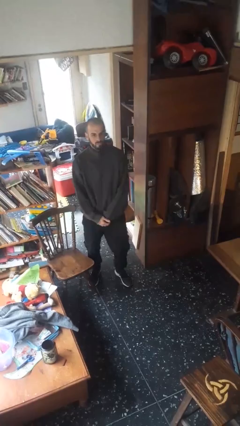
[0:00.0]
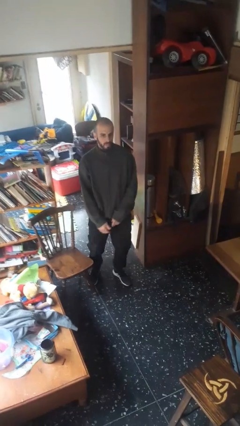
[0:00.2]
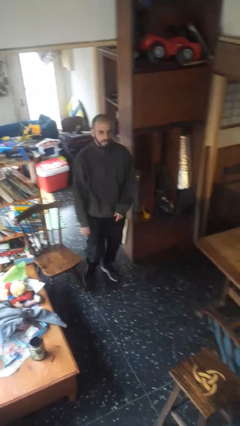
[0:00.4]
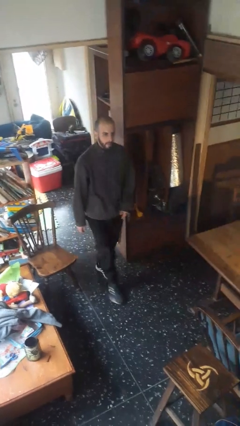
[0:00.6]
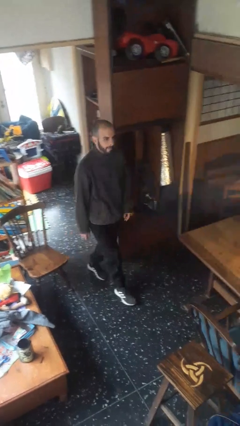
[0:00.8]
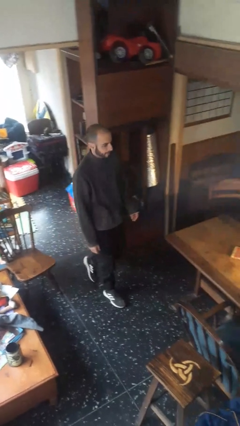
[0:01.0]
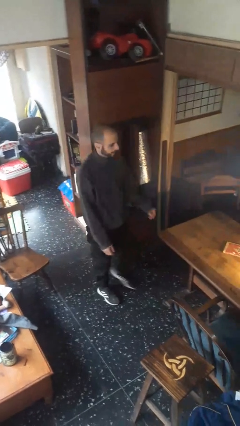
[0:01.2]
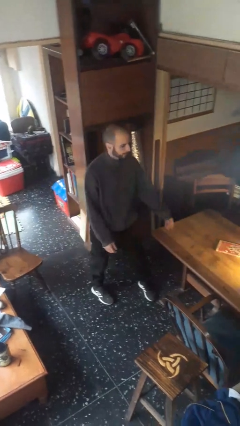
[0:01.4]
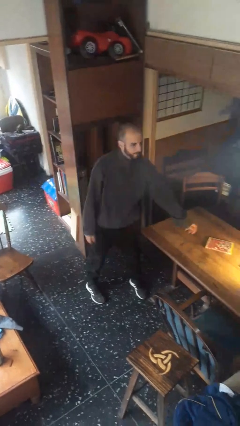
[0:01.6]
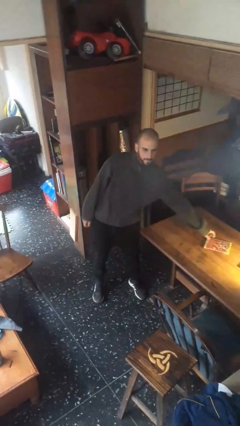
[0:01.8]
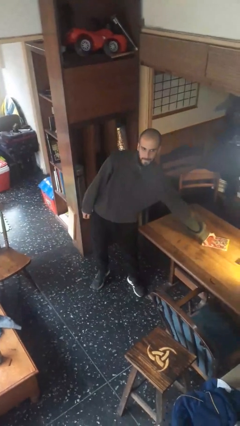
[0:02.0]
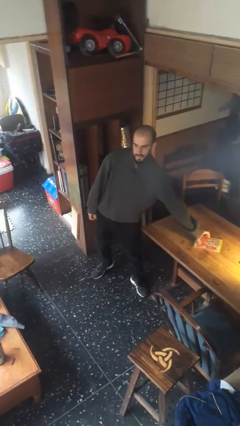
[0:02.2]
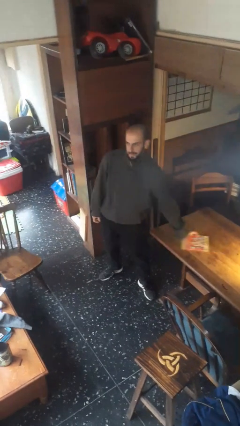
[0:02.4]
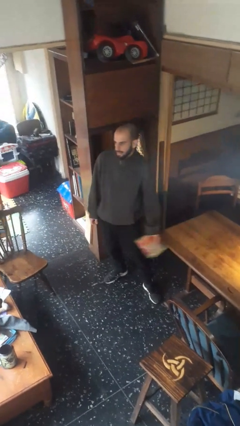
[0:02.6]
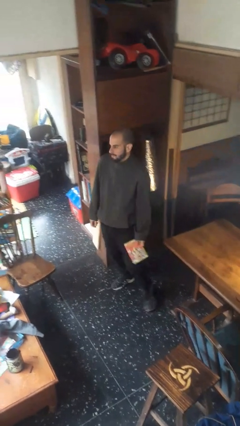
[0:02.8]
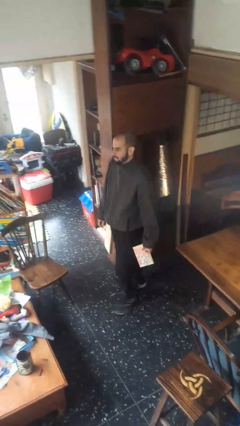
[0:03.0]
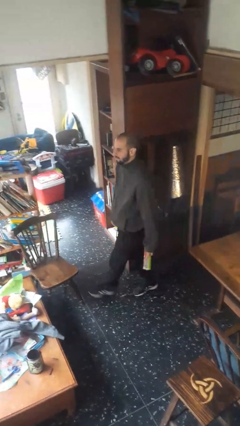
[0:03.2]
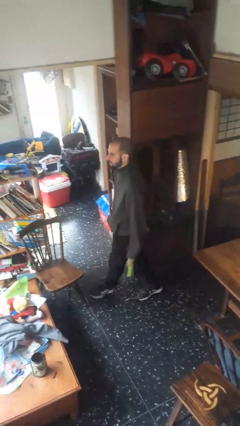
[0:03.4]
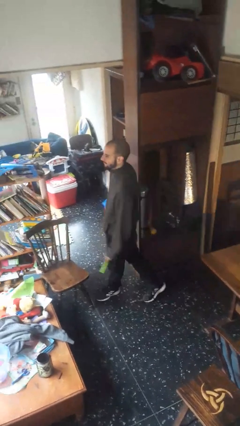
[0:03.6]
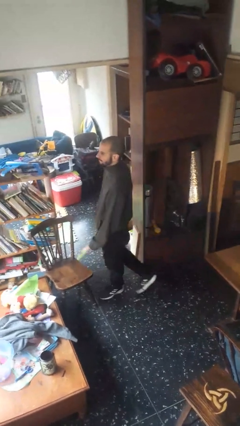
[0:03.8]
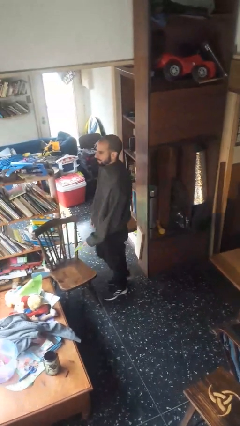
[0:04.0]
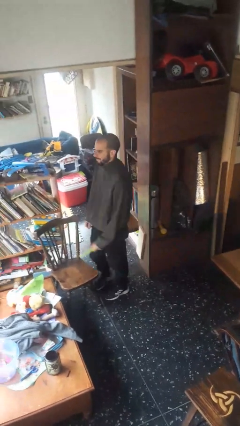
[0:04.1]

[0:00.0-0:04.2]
person picks up object from table

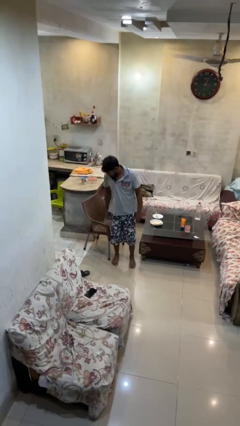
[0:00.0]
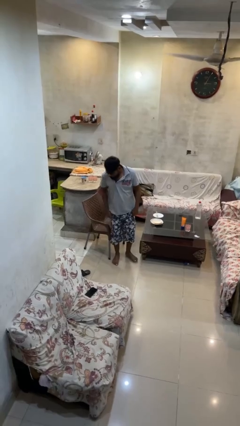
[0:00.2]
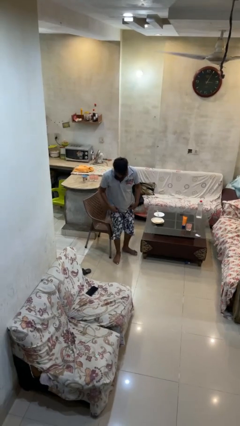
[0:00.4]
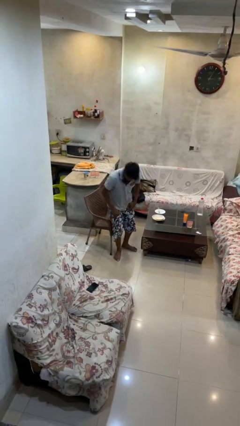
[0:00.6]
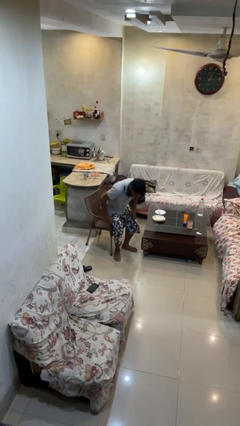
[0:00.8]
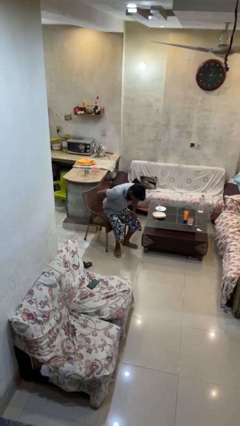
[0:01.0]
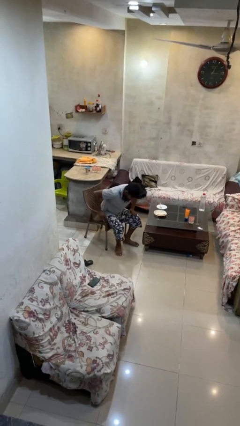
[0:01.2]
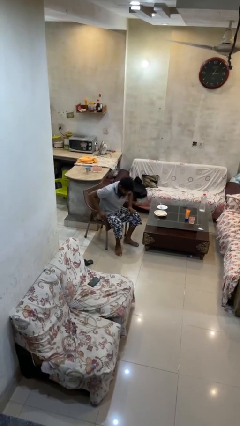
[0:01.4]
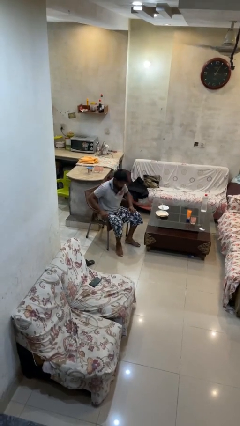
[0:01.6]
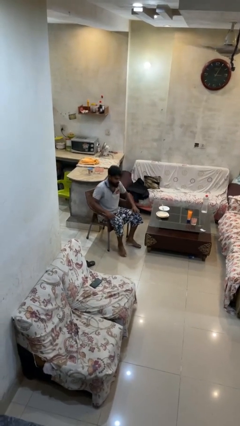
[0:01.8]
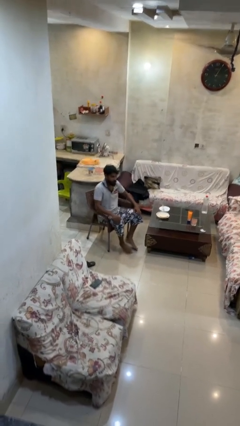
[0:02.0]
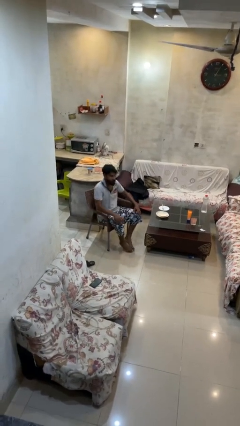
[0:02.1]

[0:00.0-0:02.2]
person sits down

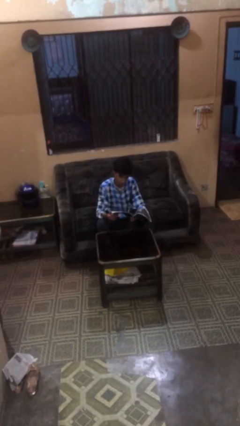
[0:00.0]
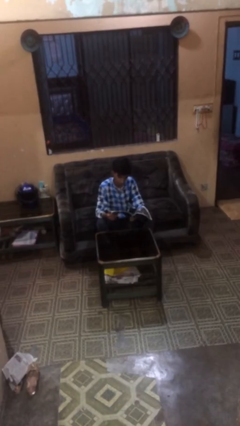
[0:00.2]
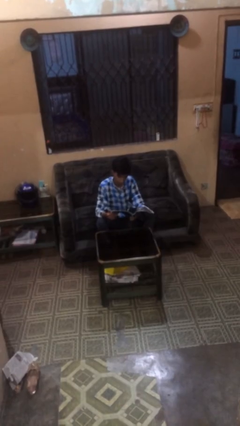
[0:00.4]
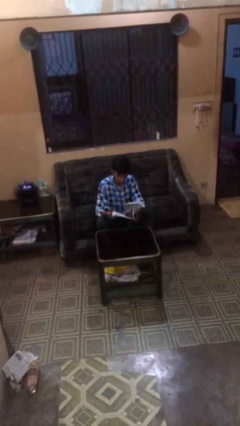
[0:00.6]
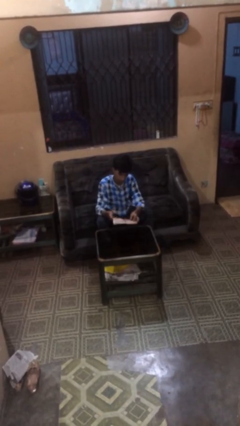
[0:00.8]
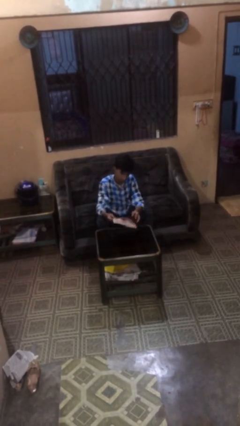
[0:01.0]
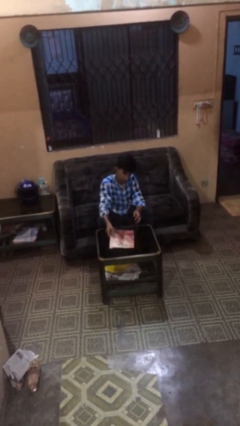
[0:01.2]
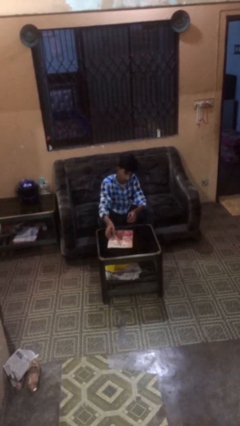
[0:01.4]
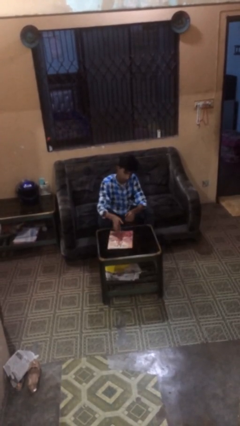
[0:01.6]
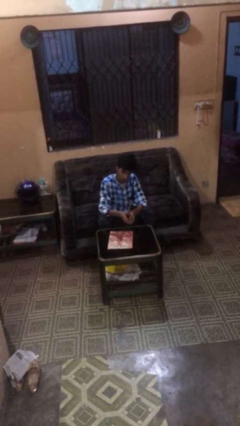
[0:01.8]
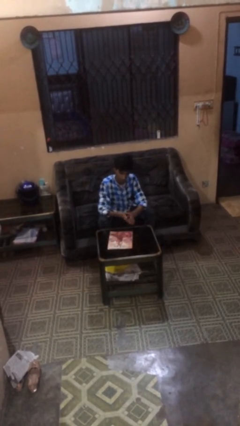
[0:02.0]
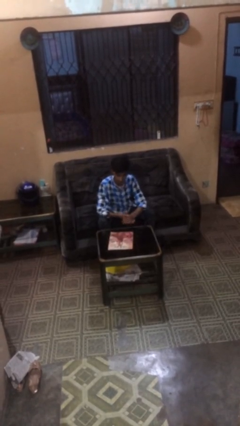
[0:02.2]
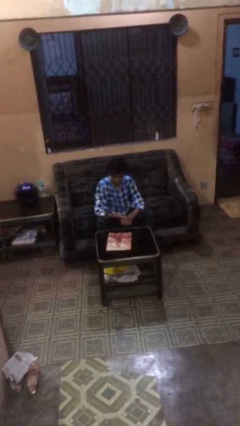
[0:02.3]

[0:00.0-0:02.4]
person puts down object on table

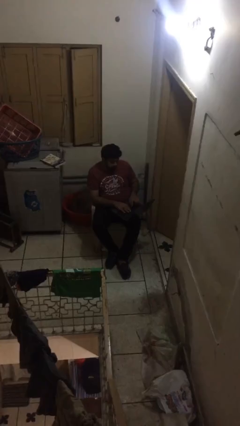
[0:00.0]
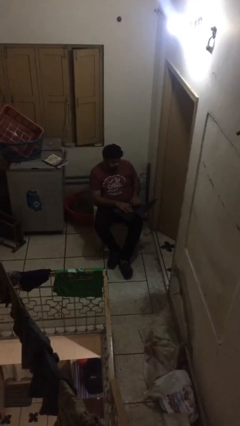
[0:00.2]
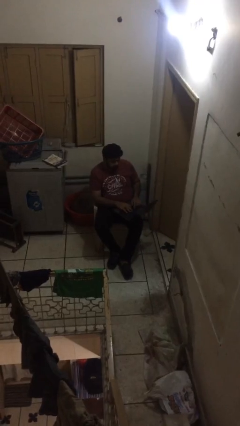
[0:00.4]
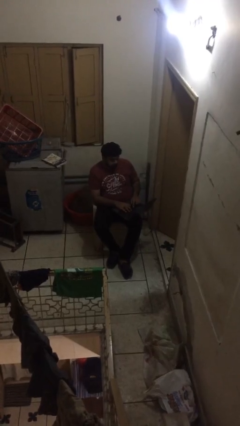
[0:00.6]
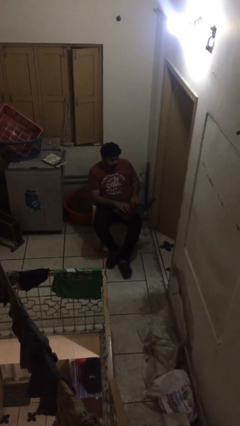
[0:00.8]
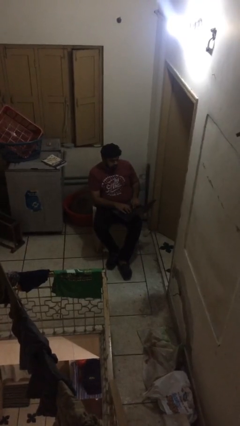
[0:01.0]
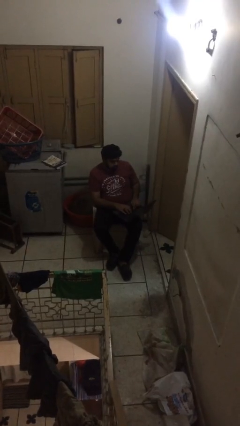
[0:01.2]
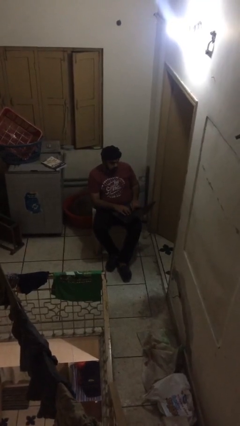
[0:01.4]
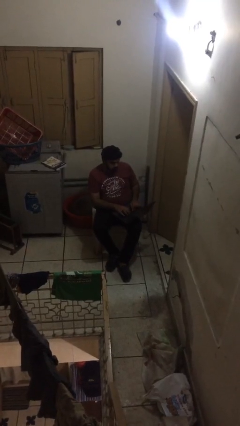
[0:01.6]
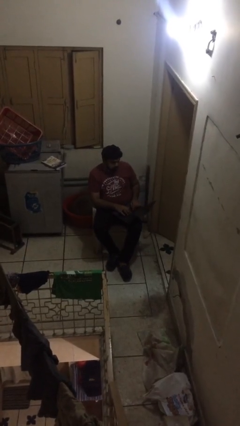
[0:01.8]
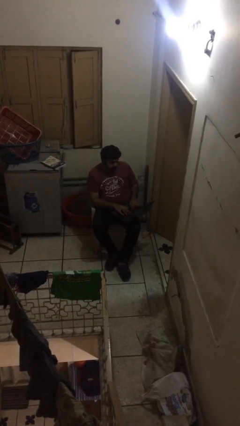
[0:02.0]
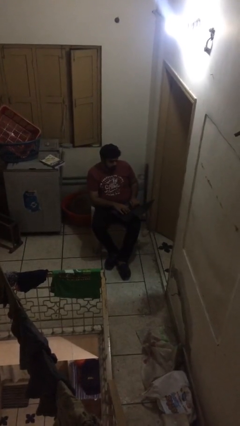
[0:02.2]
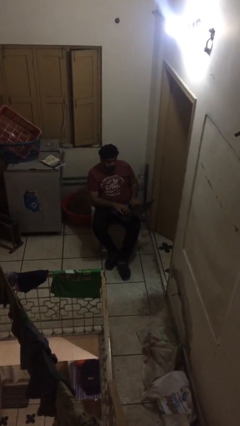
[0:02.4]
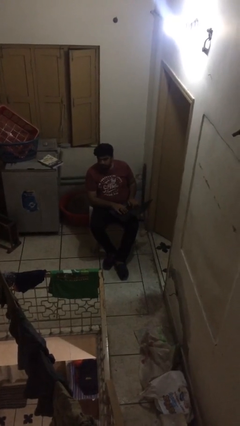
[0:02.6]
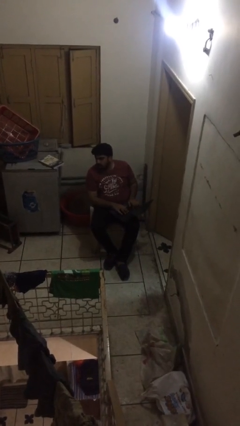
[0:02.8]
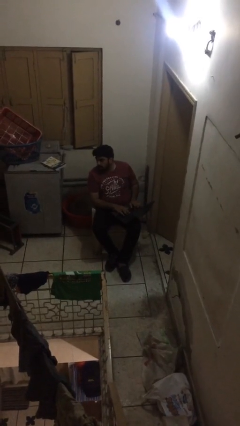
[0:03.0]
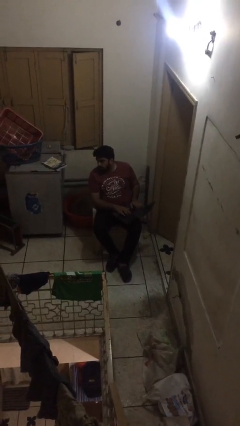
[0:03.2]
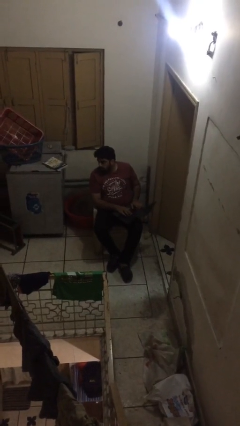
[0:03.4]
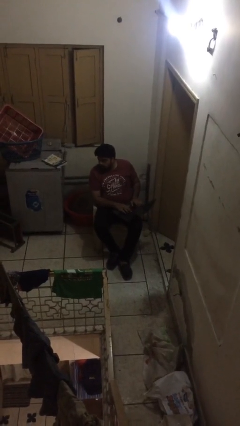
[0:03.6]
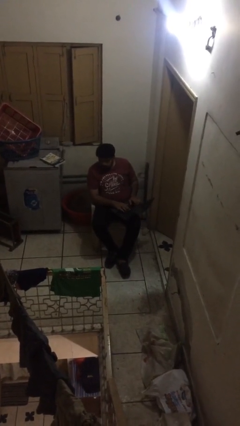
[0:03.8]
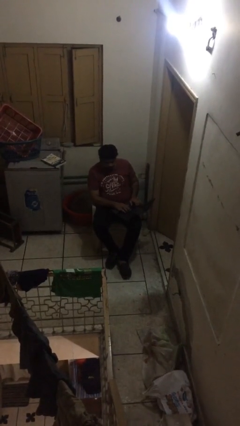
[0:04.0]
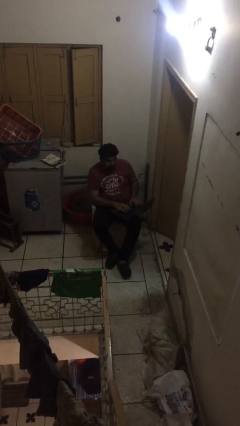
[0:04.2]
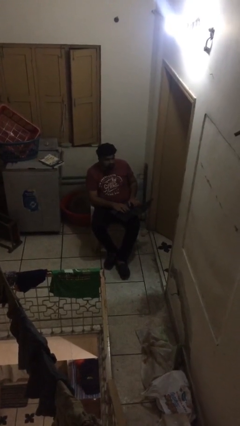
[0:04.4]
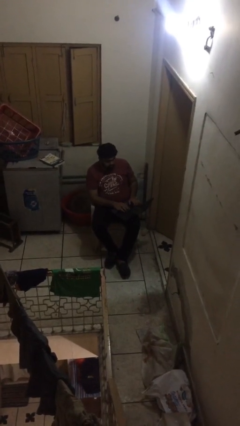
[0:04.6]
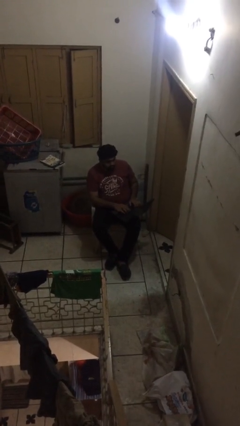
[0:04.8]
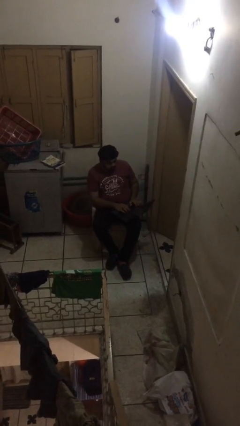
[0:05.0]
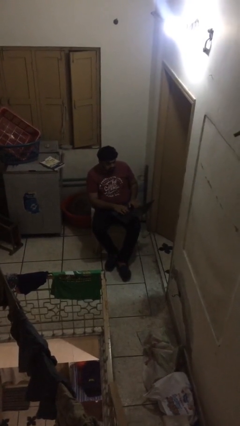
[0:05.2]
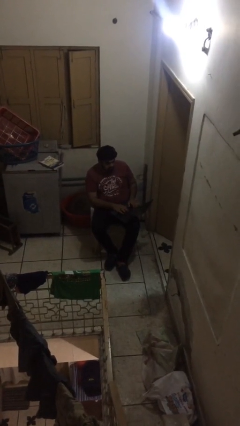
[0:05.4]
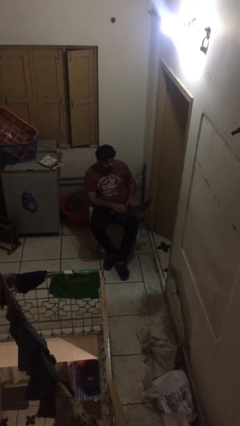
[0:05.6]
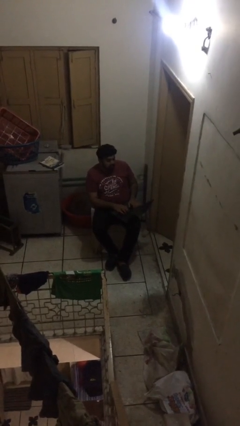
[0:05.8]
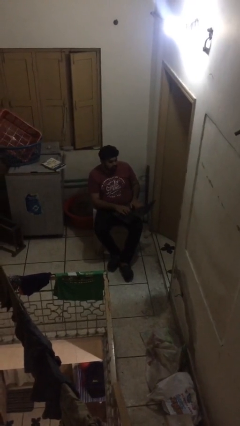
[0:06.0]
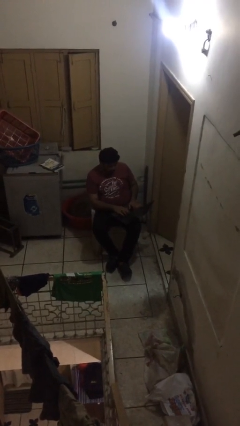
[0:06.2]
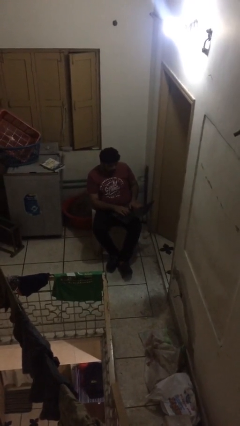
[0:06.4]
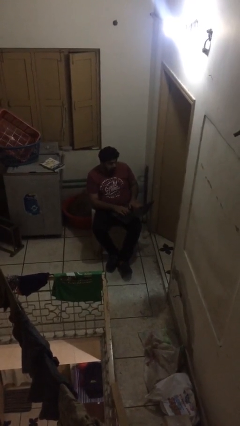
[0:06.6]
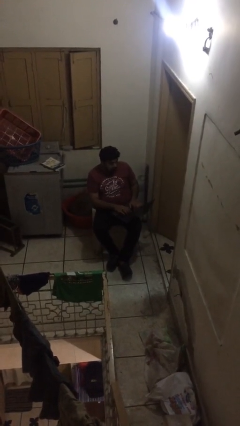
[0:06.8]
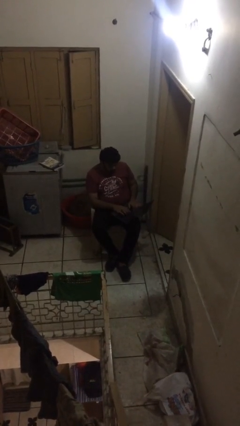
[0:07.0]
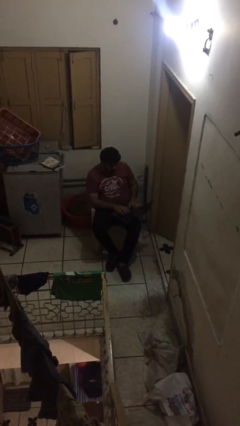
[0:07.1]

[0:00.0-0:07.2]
person interacts with laptop

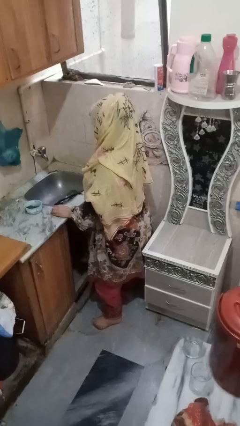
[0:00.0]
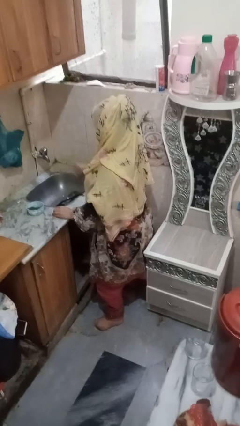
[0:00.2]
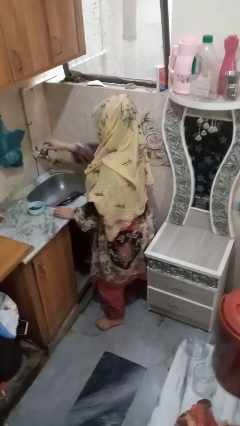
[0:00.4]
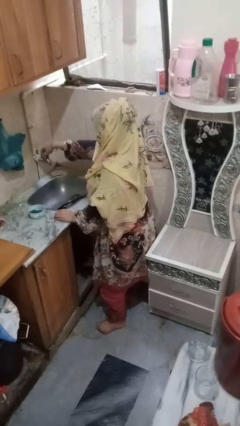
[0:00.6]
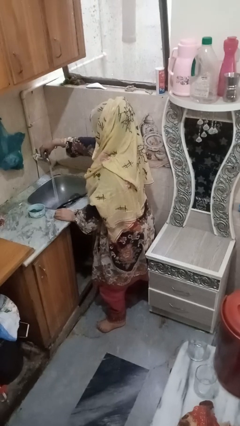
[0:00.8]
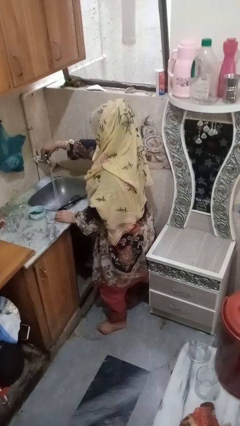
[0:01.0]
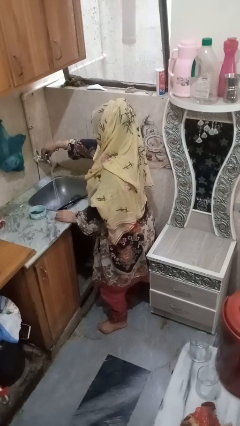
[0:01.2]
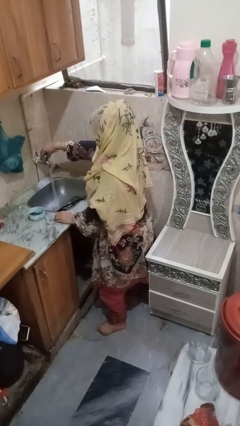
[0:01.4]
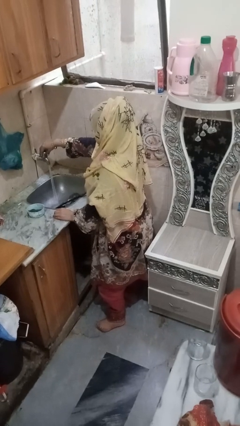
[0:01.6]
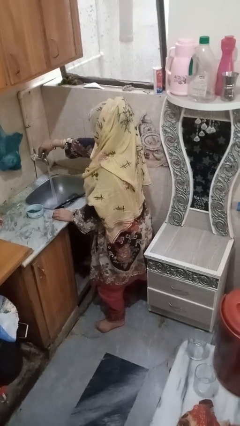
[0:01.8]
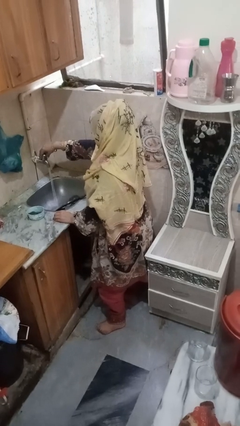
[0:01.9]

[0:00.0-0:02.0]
person turns on faucet
